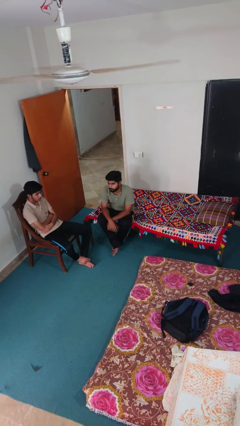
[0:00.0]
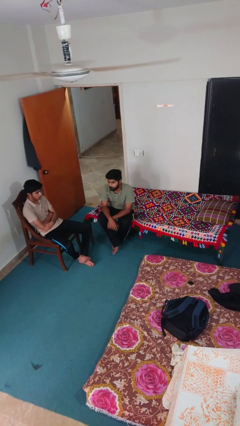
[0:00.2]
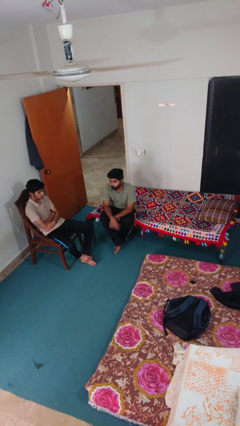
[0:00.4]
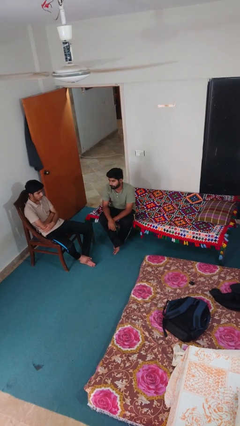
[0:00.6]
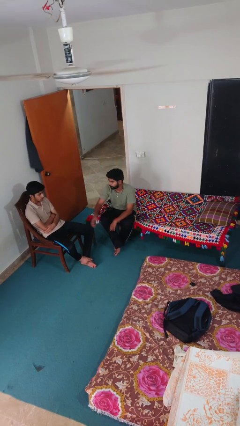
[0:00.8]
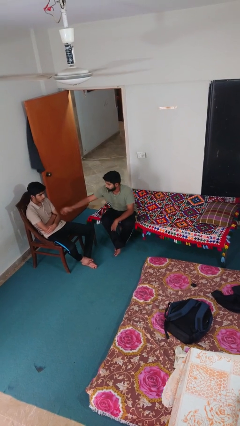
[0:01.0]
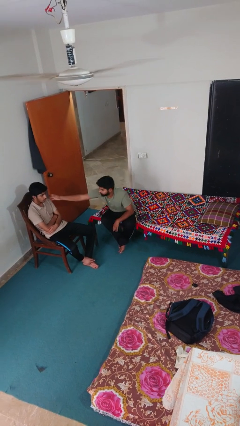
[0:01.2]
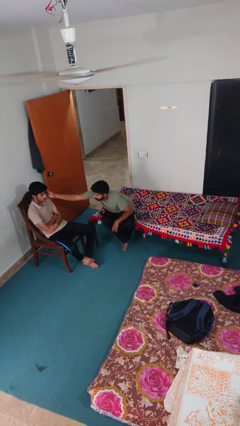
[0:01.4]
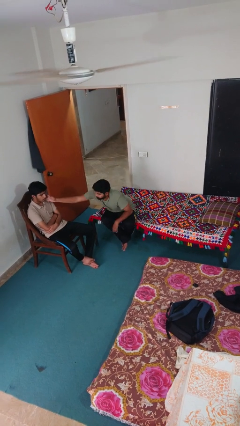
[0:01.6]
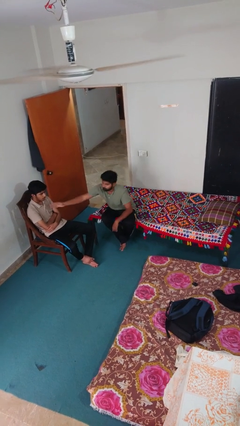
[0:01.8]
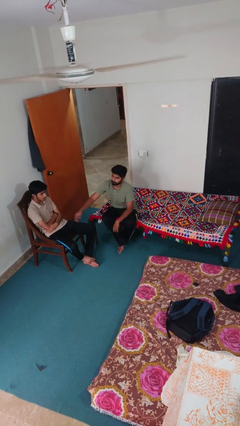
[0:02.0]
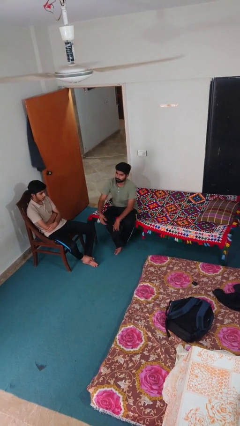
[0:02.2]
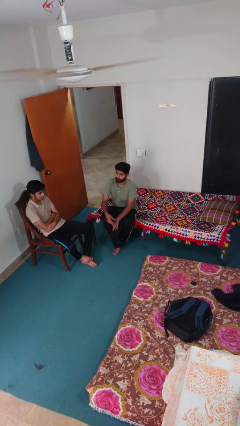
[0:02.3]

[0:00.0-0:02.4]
person touches face of person

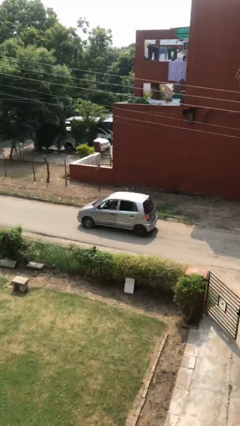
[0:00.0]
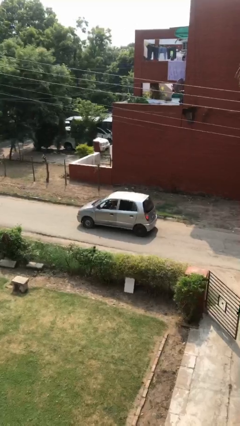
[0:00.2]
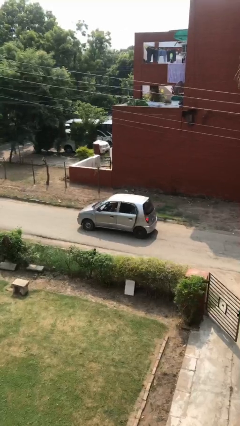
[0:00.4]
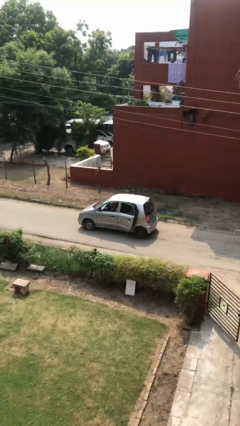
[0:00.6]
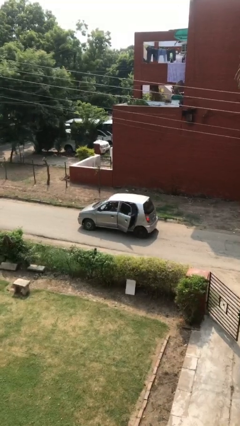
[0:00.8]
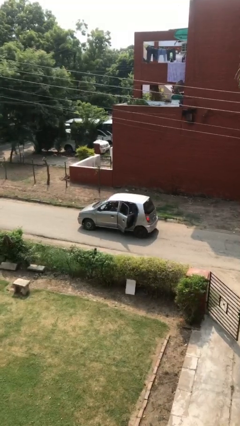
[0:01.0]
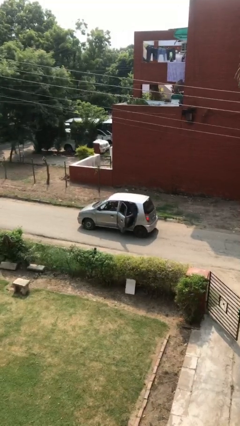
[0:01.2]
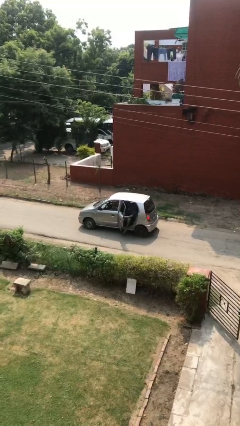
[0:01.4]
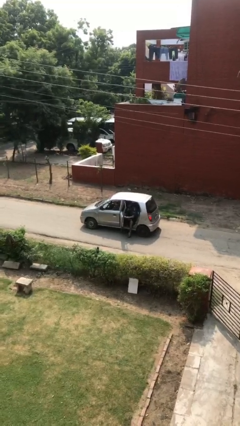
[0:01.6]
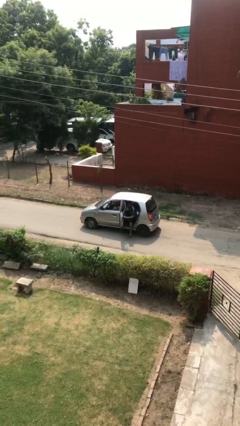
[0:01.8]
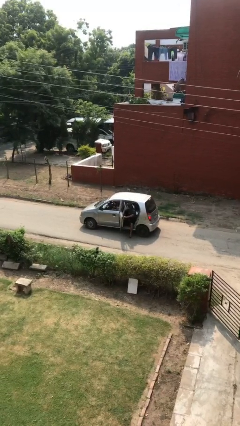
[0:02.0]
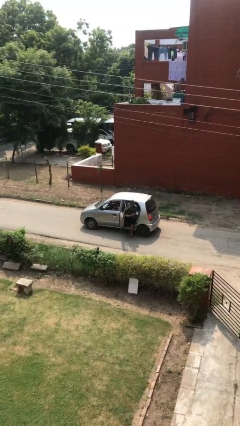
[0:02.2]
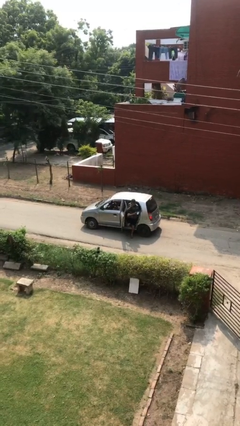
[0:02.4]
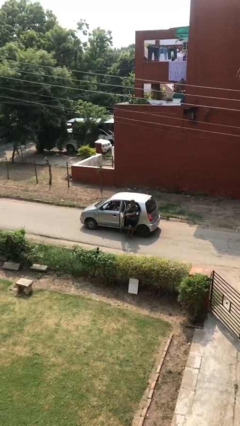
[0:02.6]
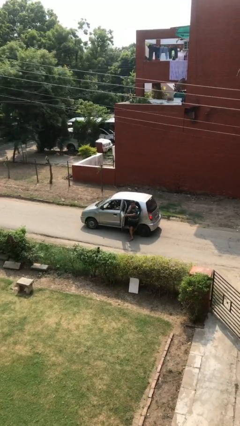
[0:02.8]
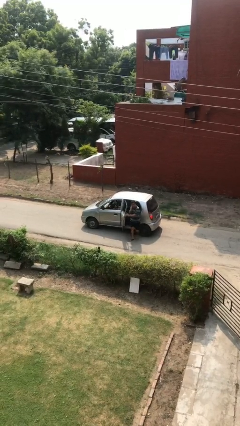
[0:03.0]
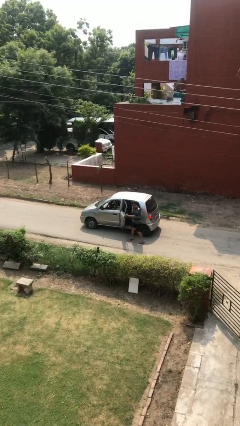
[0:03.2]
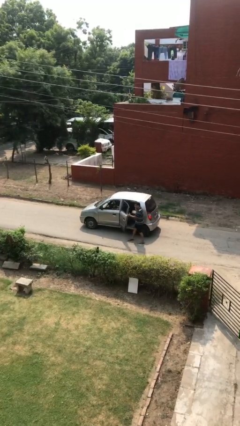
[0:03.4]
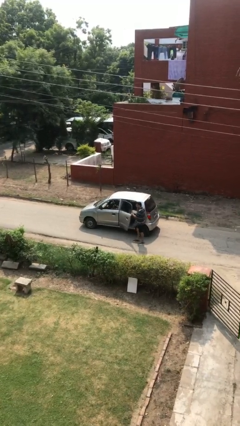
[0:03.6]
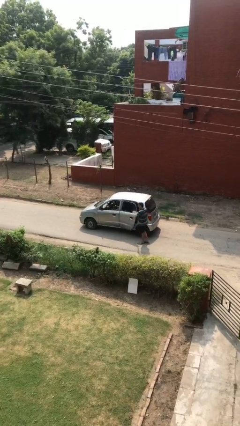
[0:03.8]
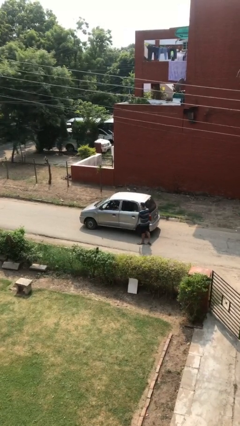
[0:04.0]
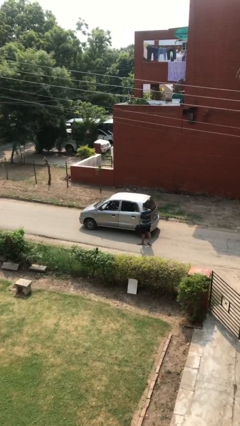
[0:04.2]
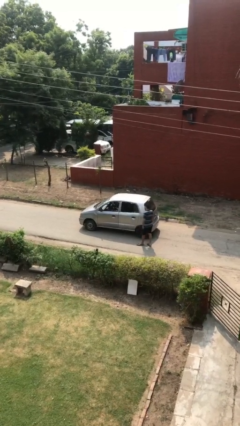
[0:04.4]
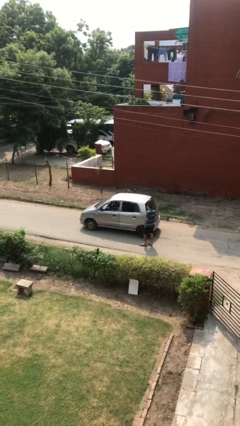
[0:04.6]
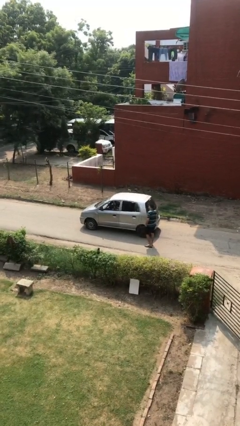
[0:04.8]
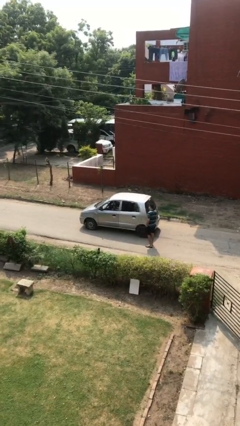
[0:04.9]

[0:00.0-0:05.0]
car drops off person

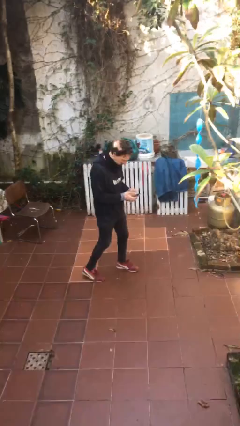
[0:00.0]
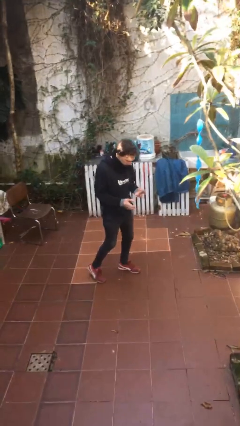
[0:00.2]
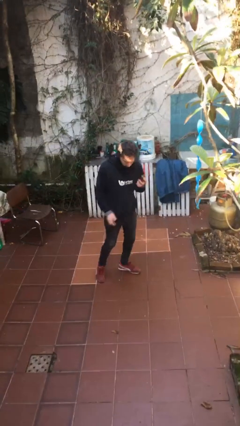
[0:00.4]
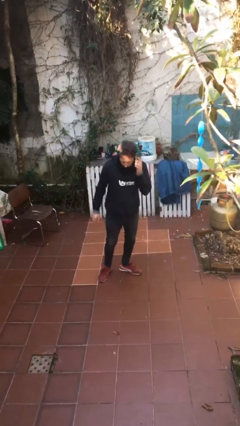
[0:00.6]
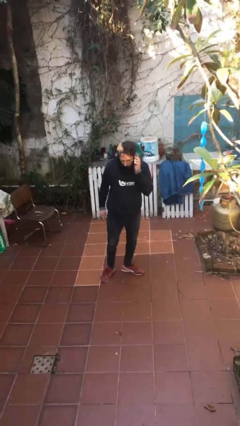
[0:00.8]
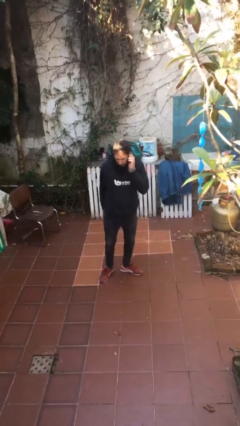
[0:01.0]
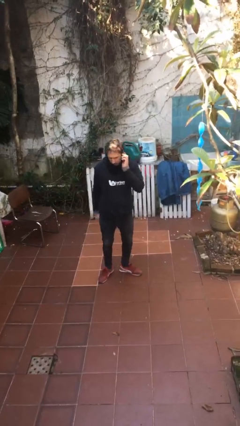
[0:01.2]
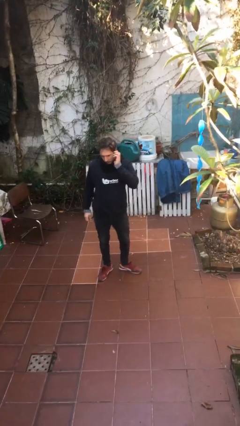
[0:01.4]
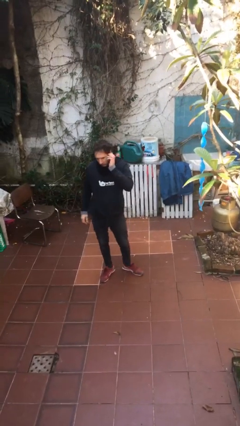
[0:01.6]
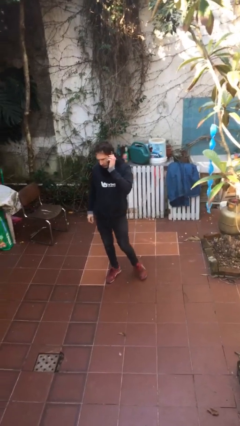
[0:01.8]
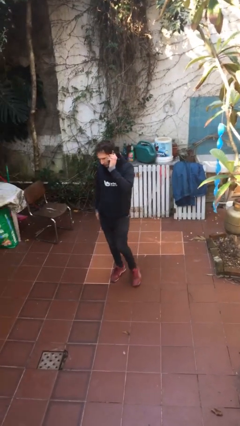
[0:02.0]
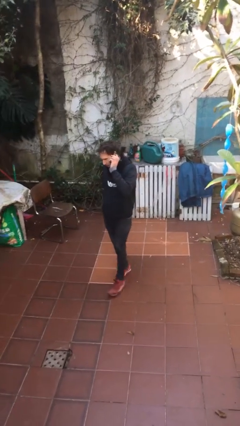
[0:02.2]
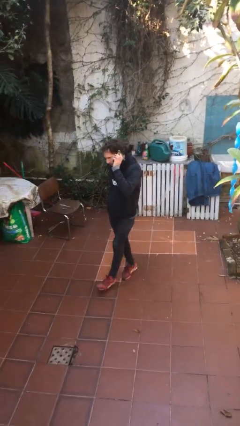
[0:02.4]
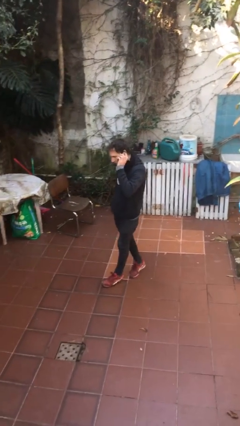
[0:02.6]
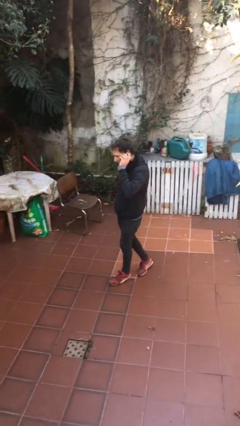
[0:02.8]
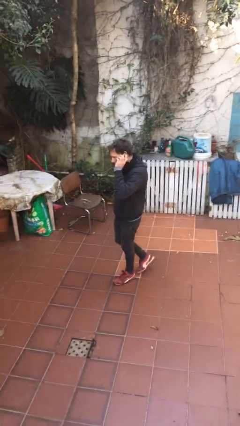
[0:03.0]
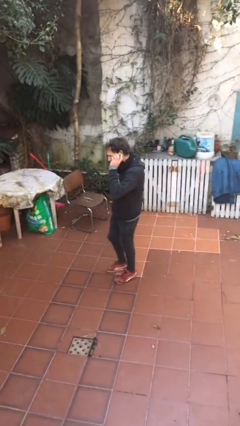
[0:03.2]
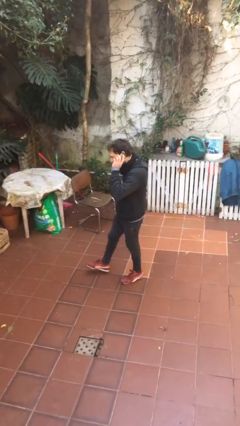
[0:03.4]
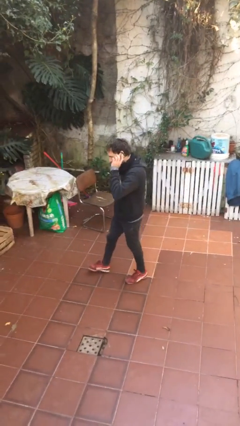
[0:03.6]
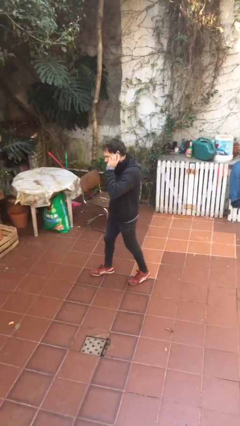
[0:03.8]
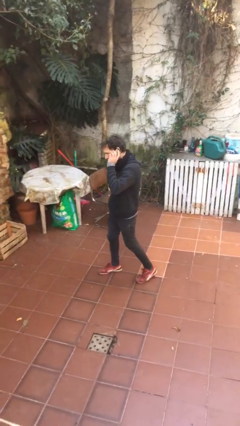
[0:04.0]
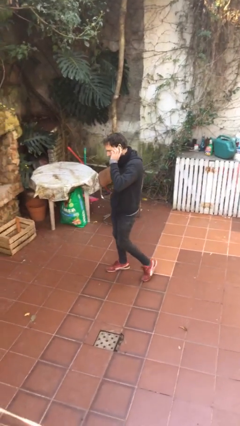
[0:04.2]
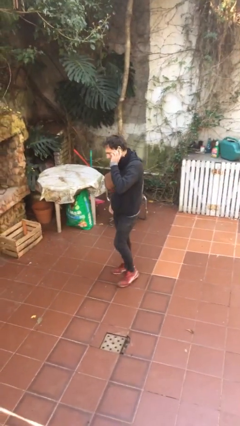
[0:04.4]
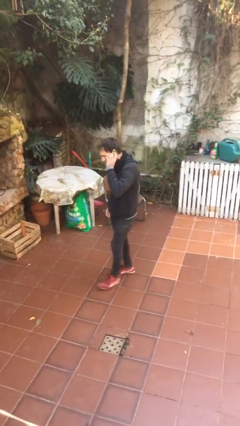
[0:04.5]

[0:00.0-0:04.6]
person talks on phone

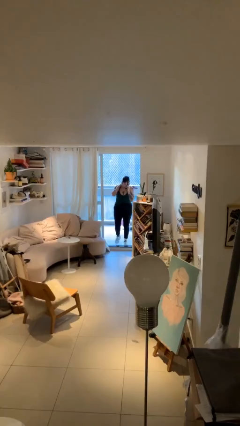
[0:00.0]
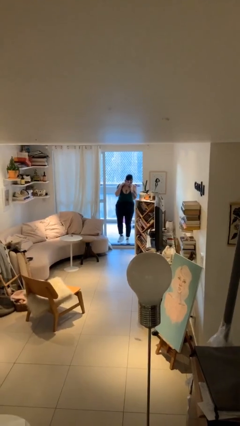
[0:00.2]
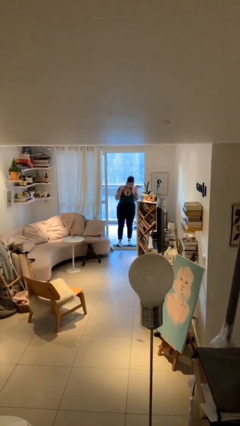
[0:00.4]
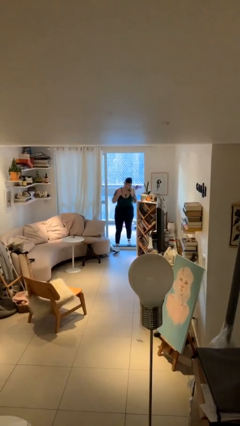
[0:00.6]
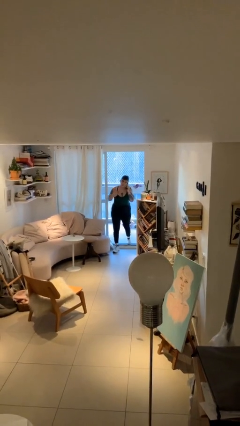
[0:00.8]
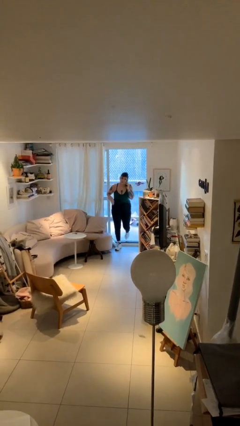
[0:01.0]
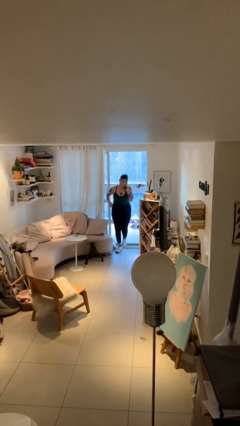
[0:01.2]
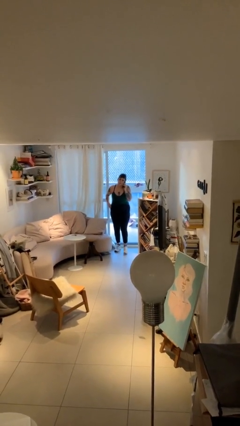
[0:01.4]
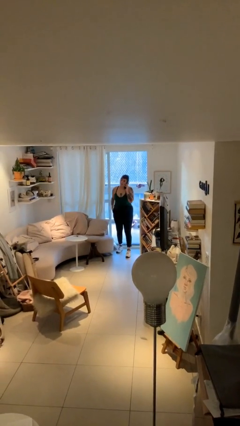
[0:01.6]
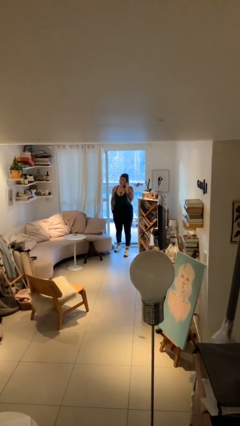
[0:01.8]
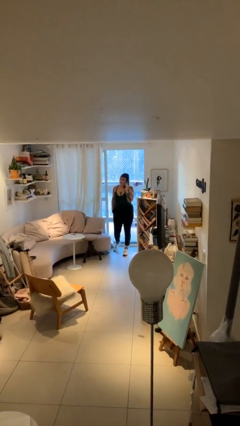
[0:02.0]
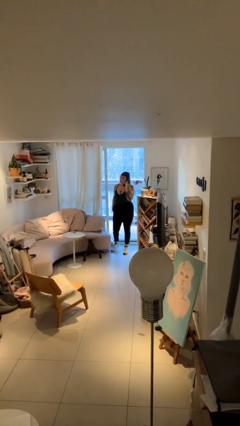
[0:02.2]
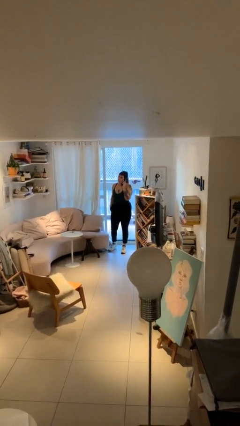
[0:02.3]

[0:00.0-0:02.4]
person enters scene through structure

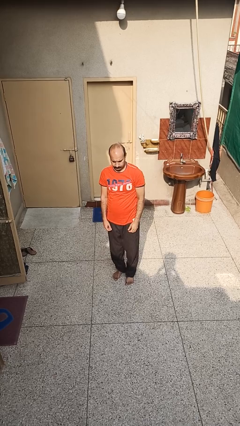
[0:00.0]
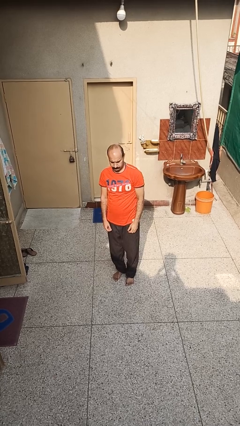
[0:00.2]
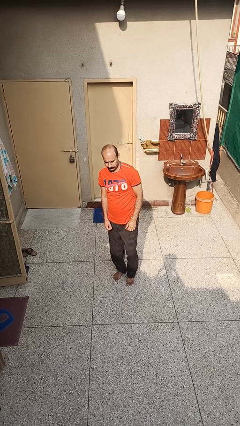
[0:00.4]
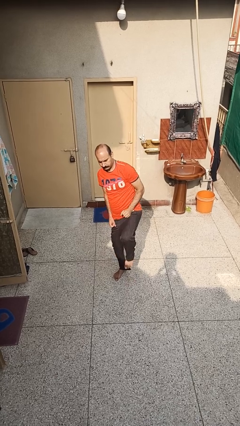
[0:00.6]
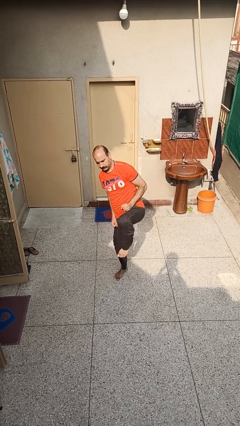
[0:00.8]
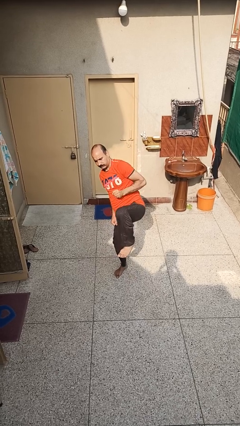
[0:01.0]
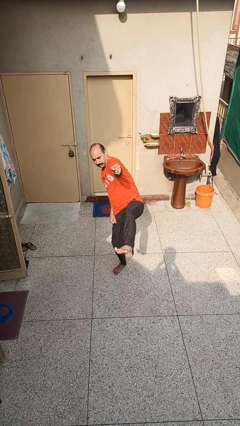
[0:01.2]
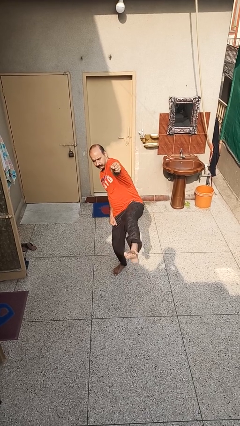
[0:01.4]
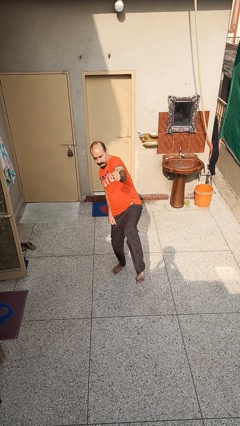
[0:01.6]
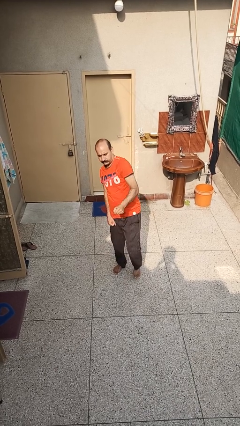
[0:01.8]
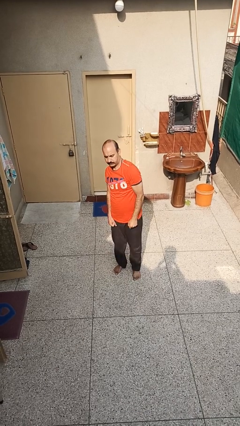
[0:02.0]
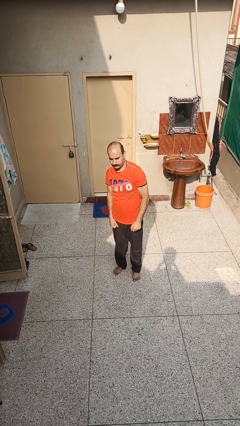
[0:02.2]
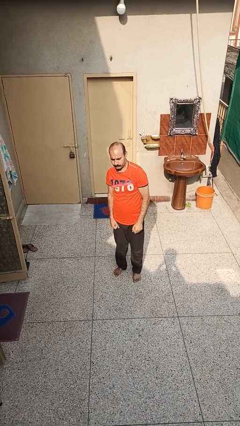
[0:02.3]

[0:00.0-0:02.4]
person karate kicks

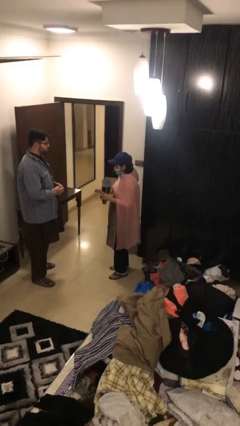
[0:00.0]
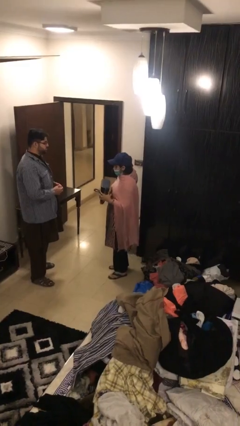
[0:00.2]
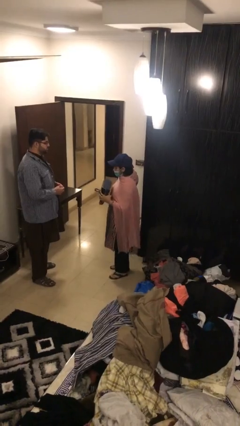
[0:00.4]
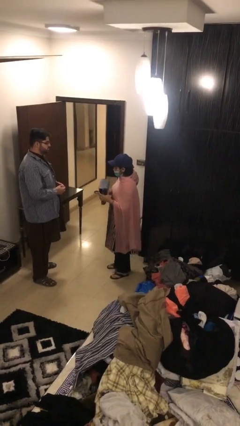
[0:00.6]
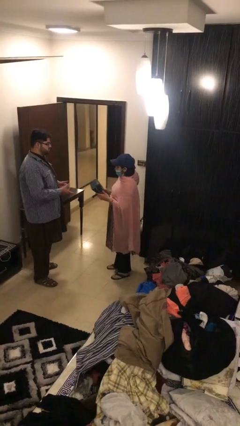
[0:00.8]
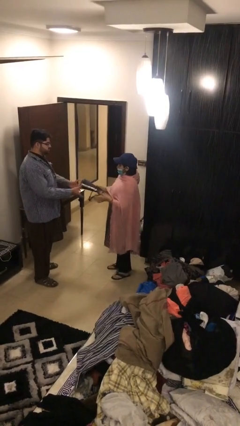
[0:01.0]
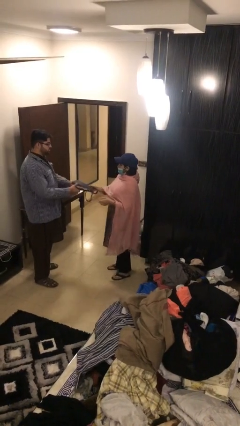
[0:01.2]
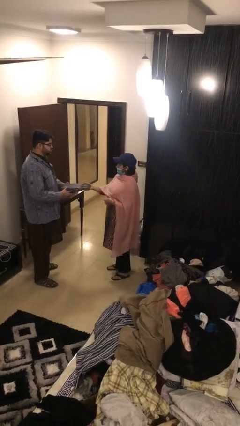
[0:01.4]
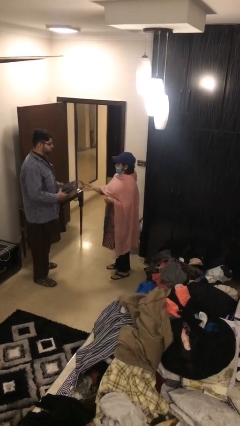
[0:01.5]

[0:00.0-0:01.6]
person transfers object to person
